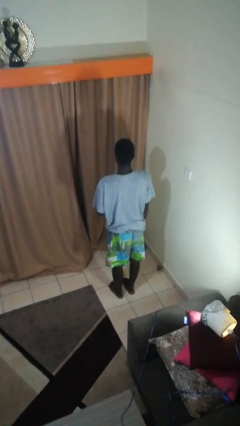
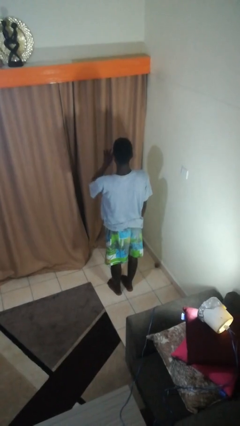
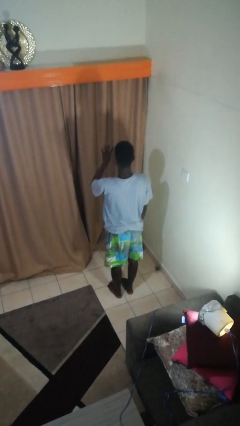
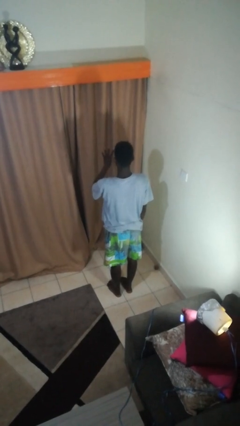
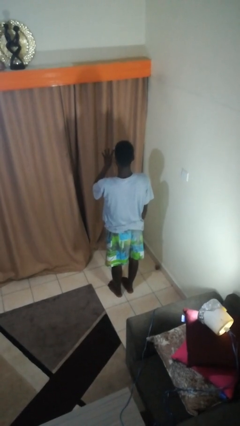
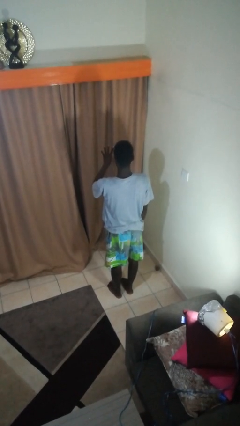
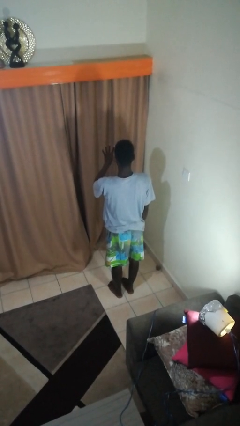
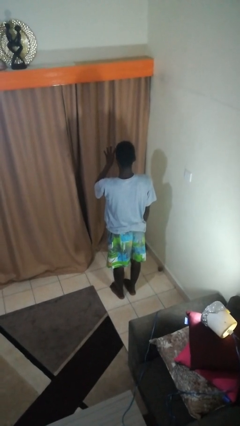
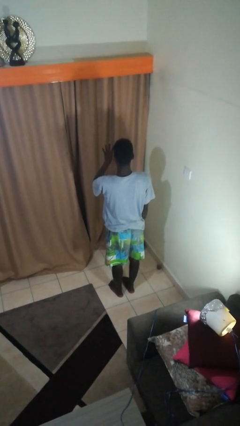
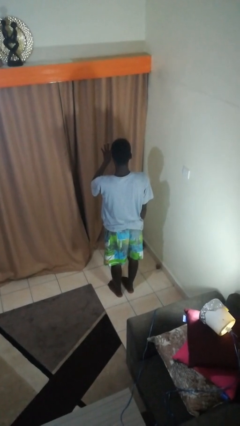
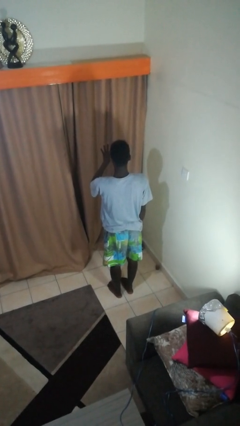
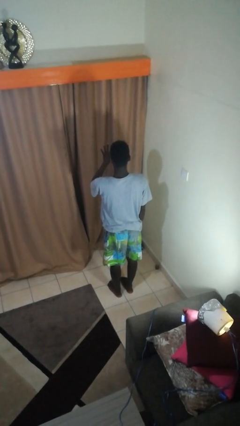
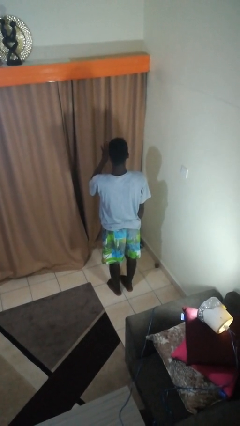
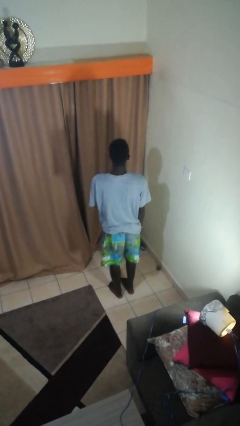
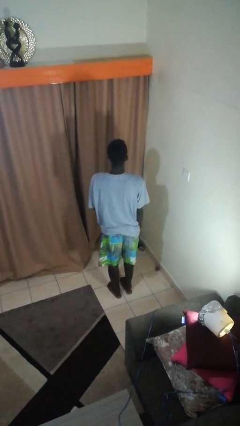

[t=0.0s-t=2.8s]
person gestures number four

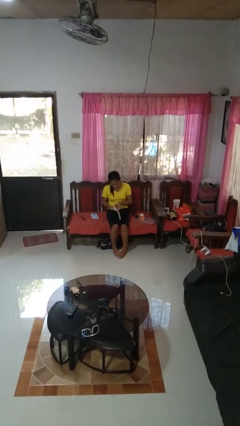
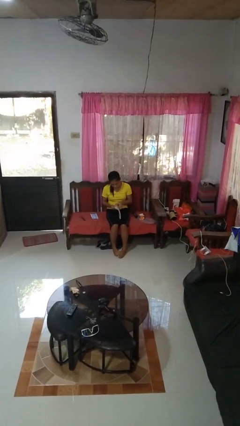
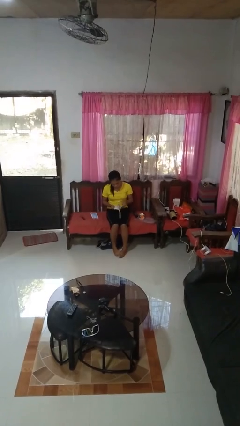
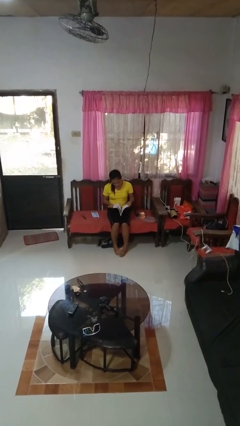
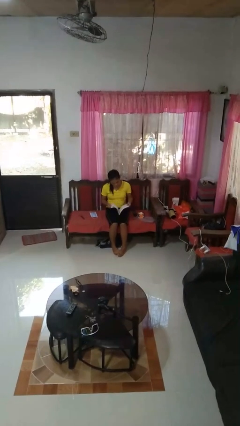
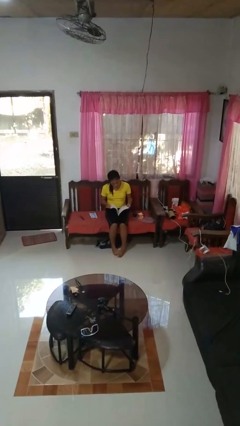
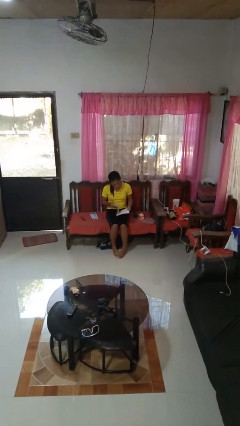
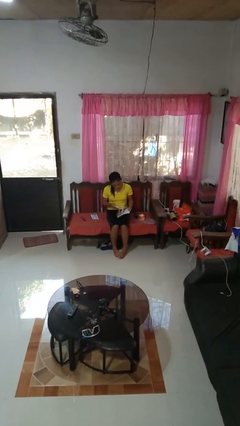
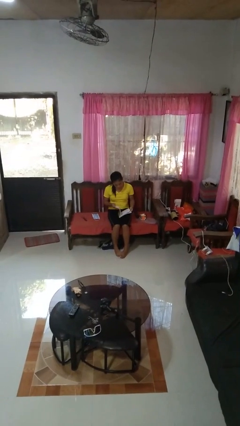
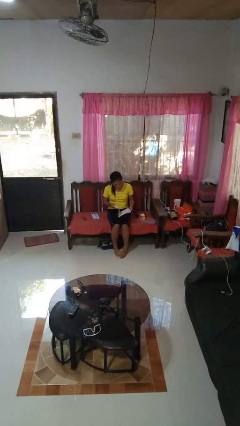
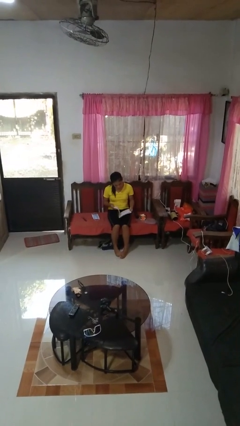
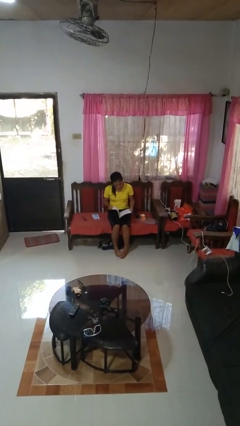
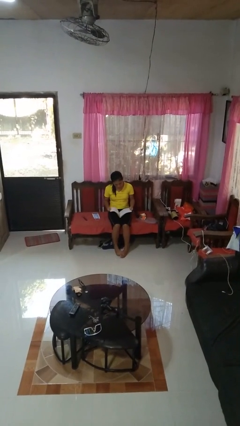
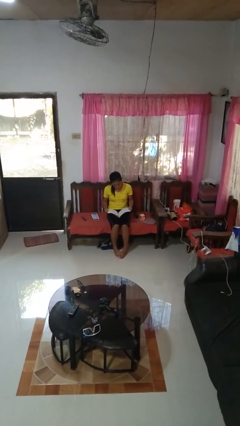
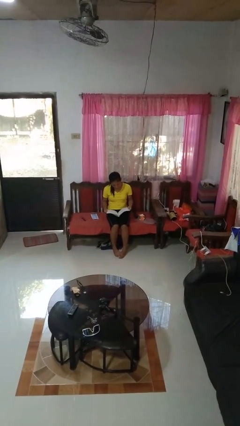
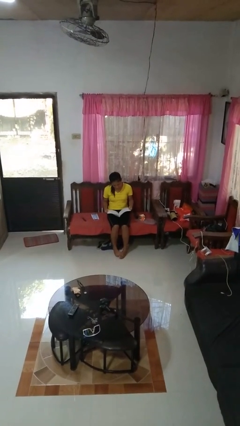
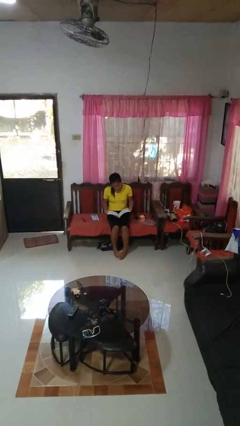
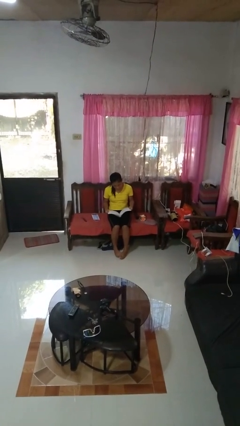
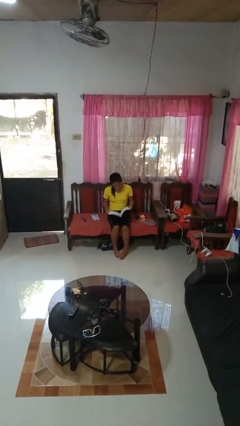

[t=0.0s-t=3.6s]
person reads book

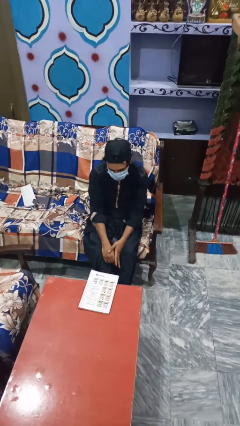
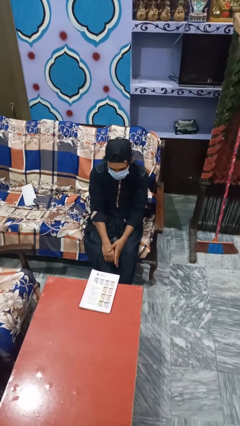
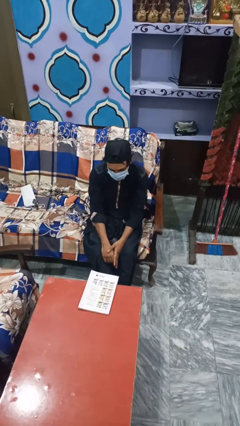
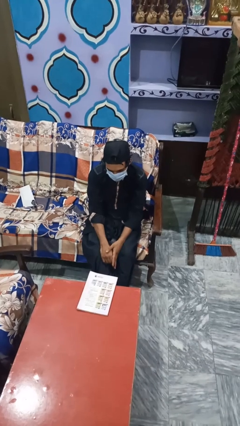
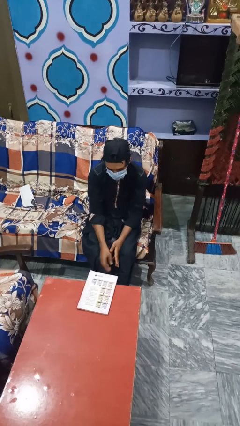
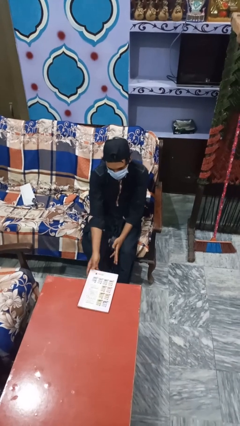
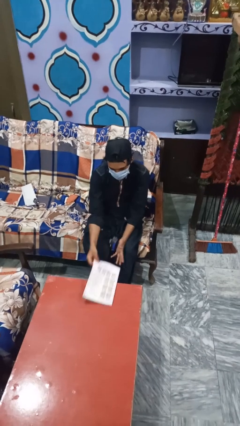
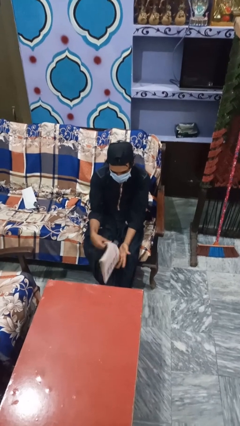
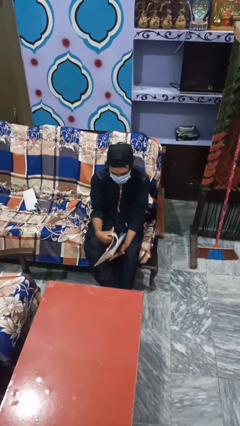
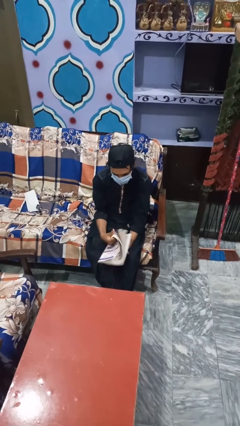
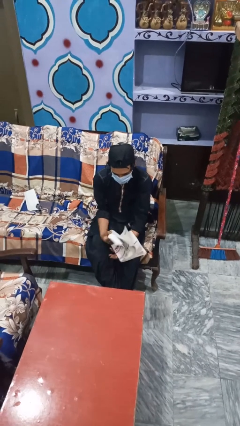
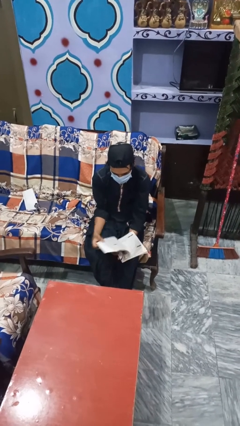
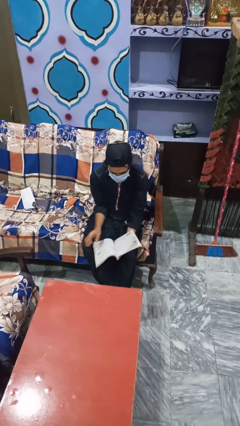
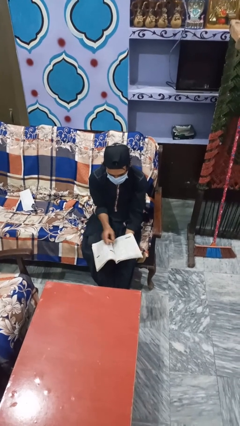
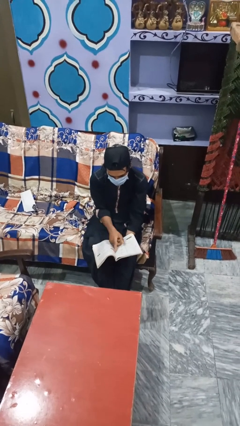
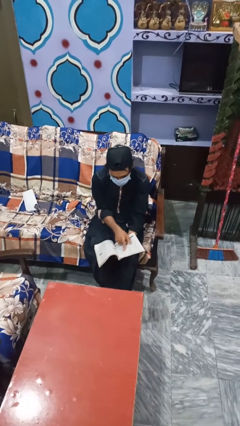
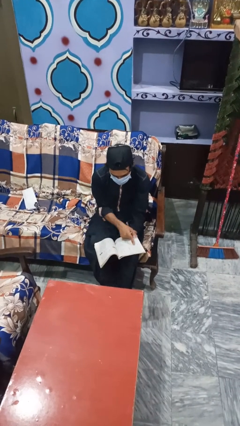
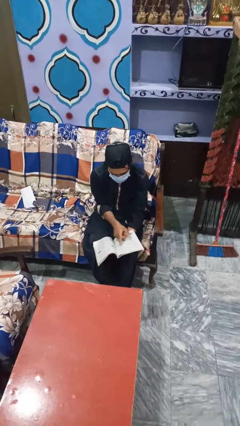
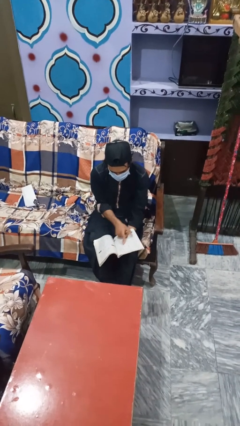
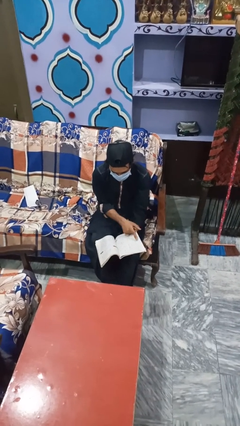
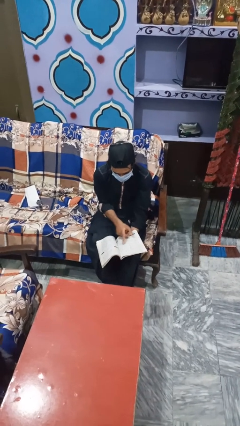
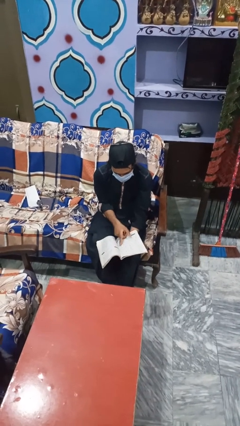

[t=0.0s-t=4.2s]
person reads magazine

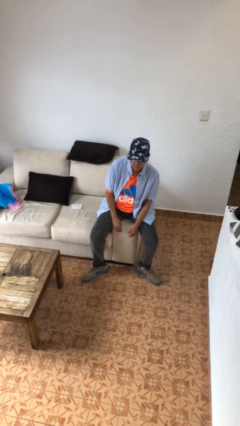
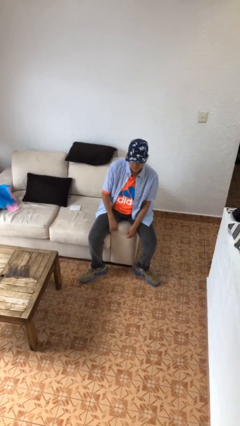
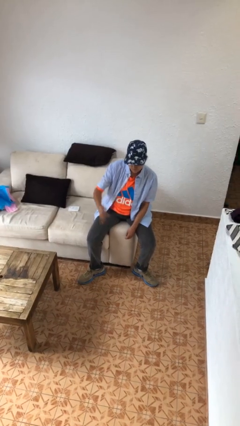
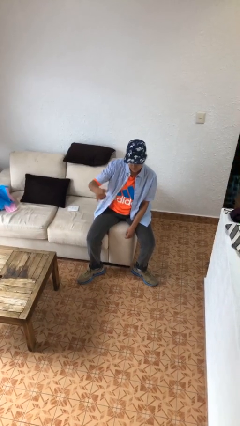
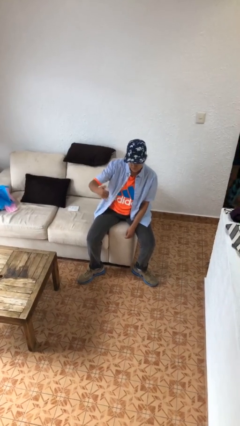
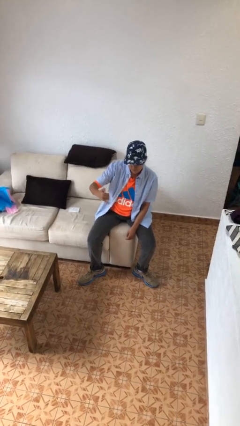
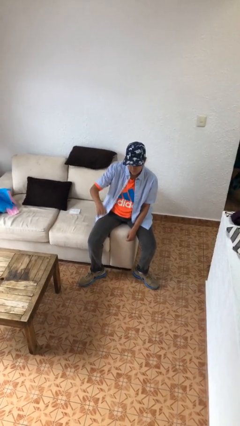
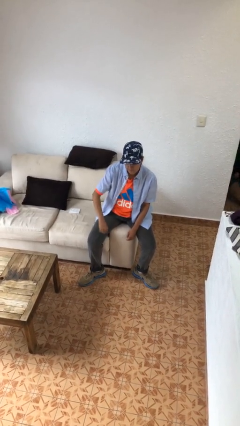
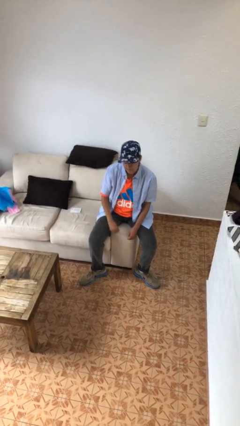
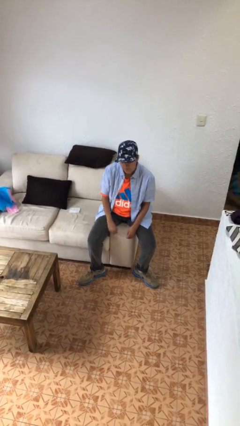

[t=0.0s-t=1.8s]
person gestures hang loose

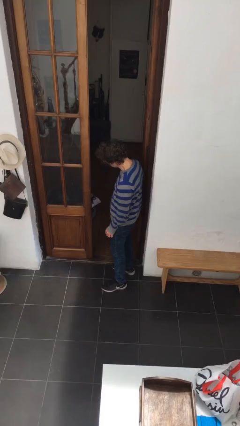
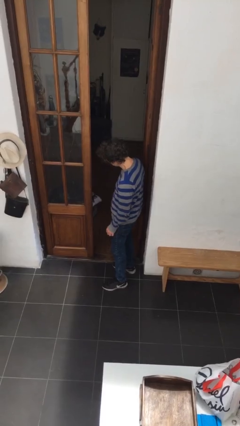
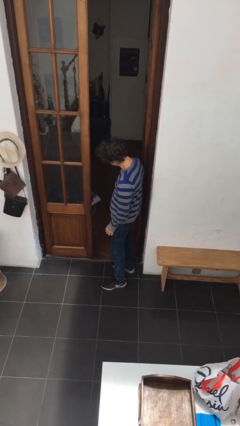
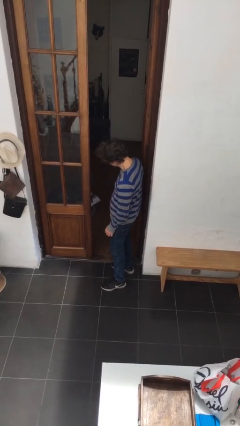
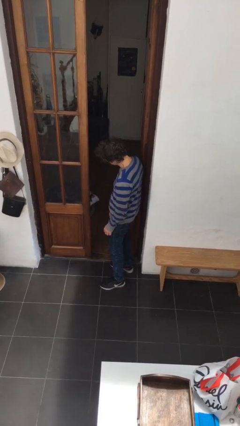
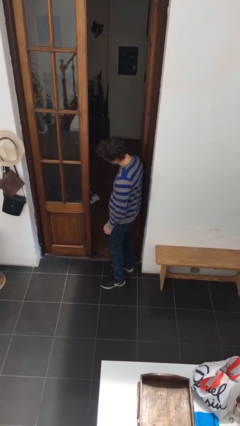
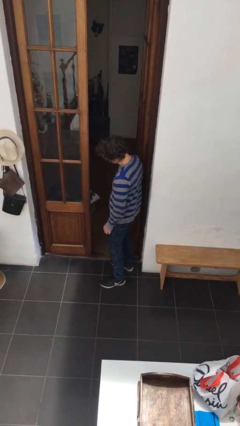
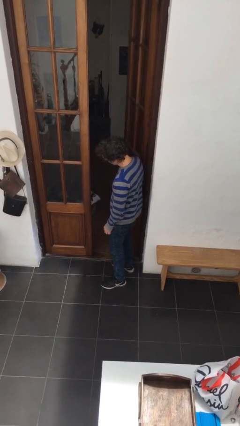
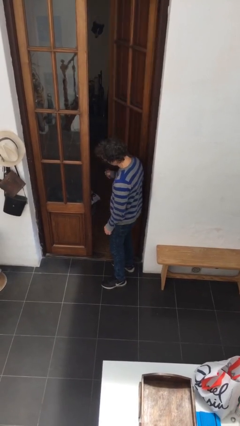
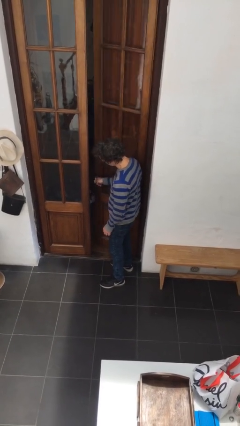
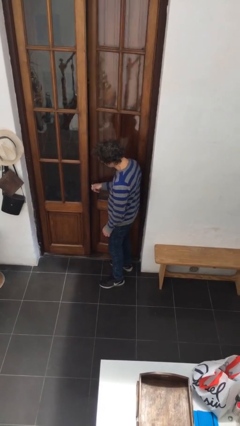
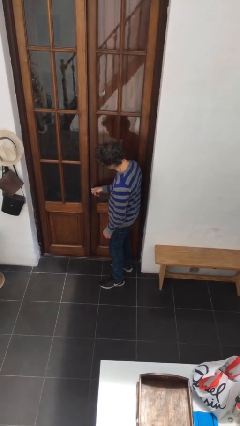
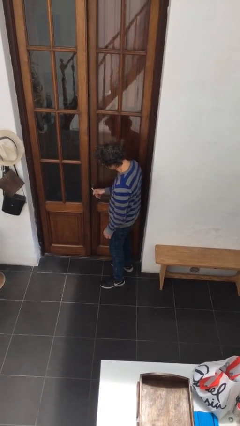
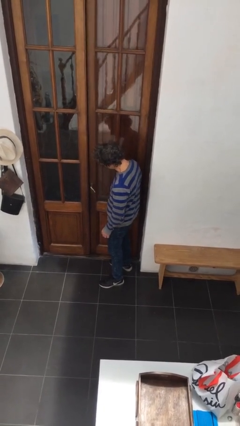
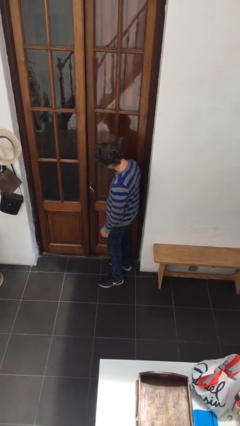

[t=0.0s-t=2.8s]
person closes facility door

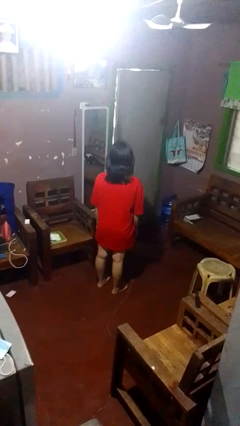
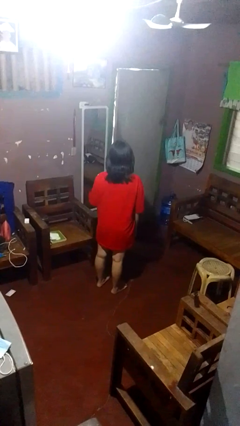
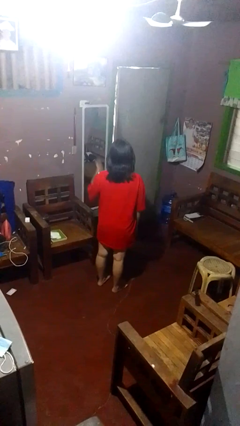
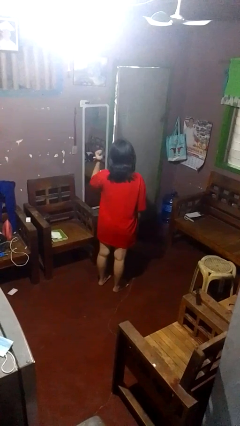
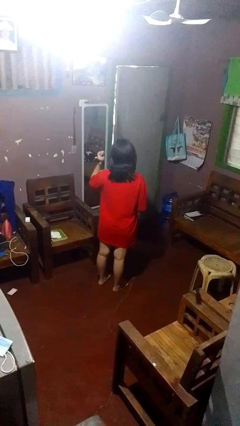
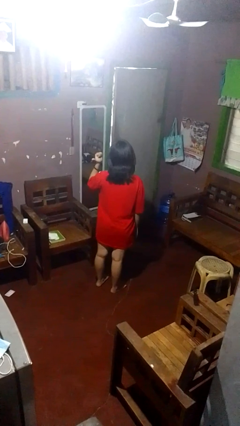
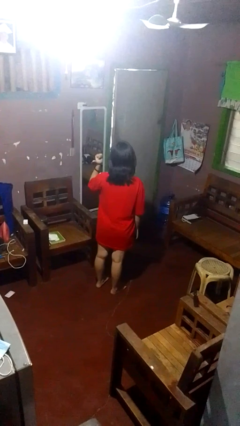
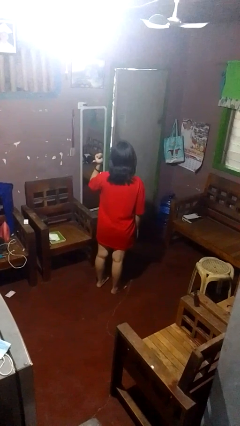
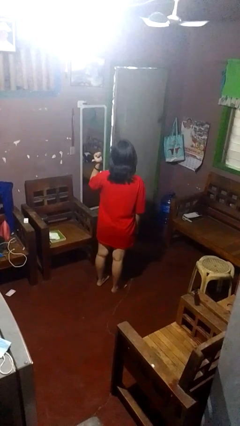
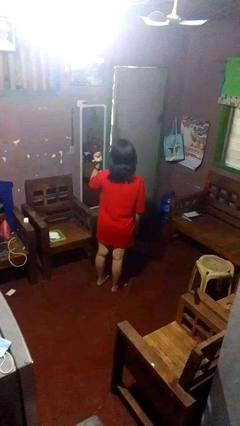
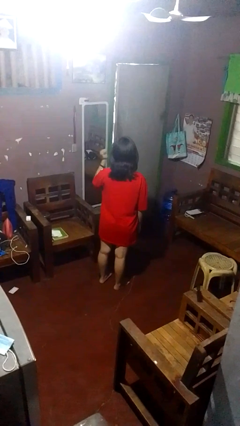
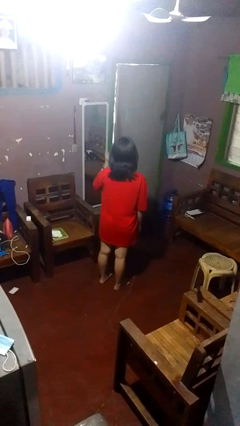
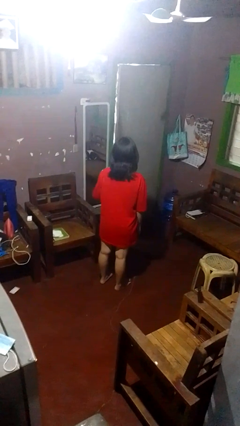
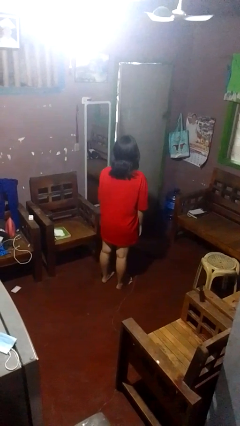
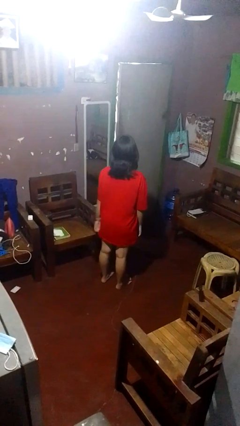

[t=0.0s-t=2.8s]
person gestures behind me
